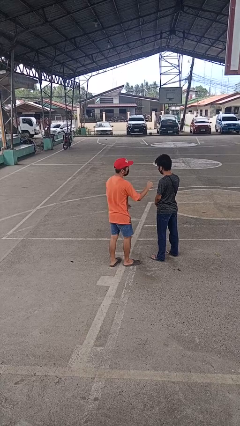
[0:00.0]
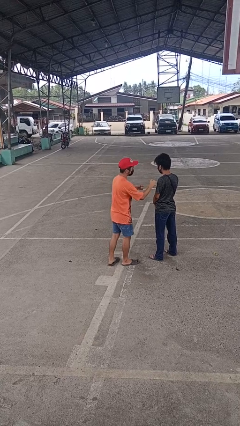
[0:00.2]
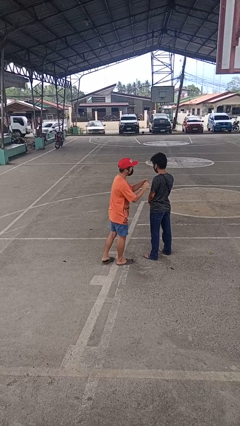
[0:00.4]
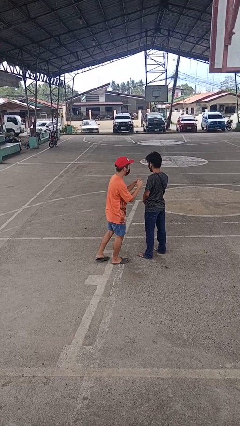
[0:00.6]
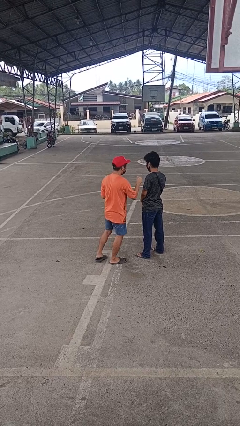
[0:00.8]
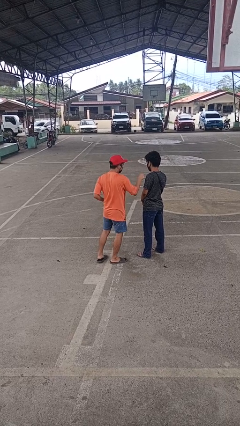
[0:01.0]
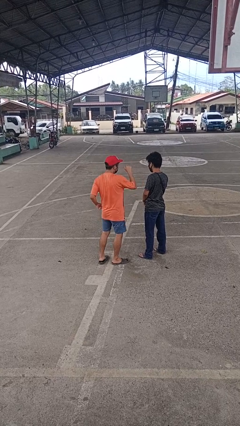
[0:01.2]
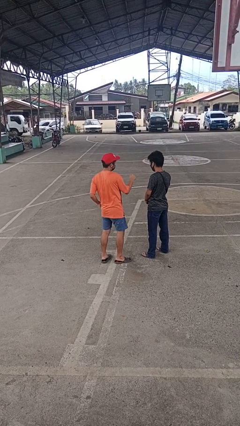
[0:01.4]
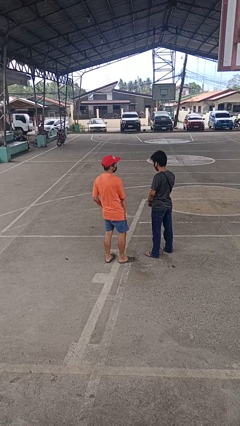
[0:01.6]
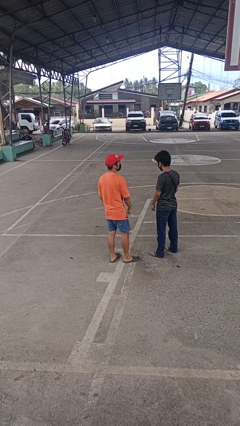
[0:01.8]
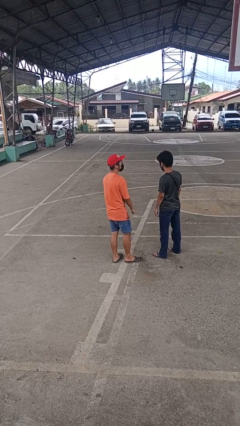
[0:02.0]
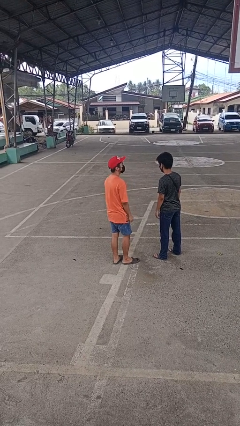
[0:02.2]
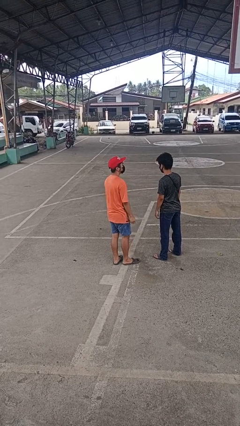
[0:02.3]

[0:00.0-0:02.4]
person pounds shoulders of person

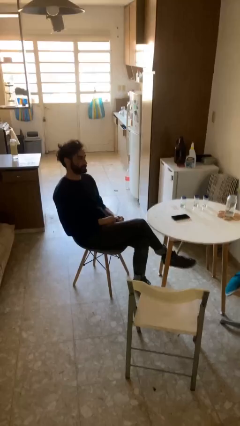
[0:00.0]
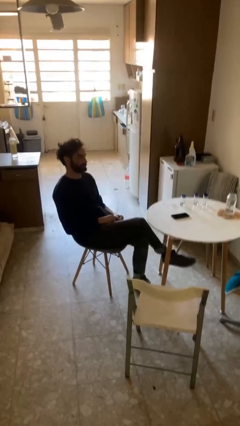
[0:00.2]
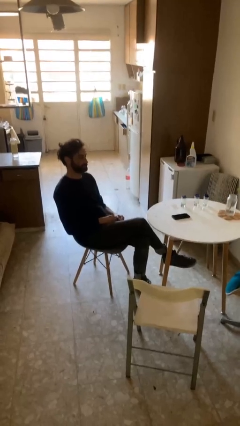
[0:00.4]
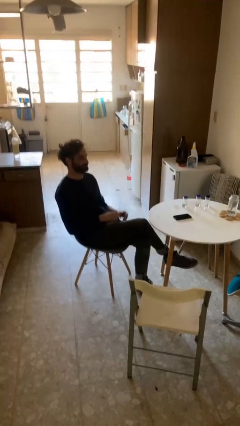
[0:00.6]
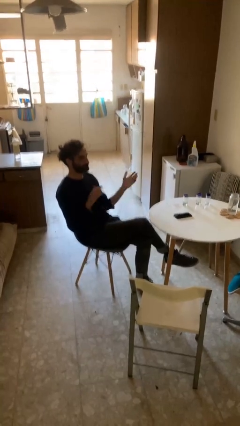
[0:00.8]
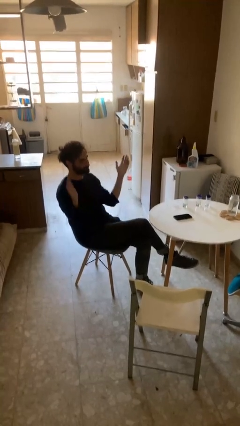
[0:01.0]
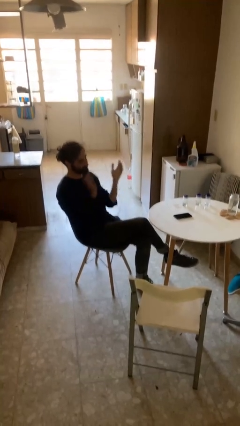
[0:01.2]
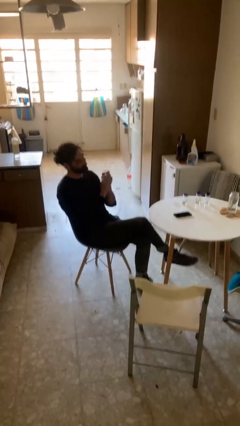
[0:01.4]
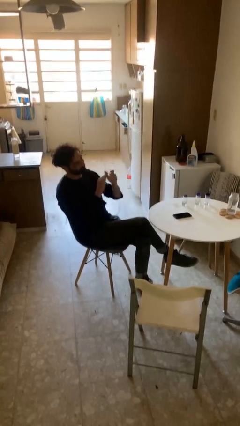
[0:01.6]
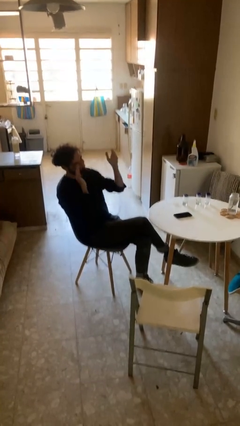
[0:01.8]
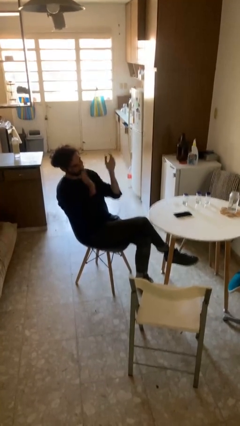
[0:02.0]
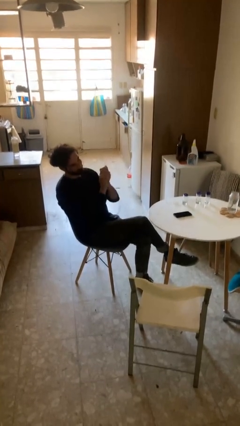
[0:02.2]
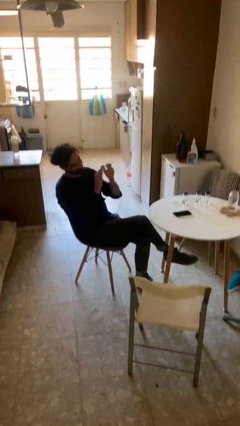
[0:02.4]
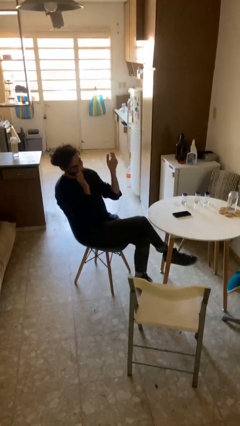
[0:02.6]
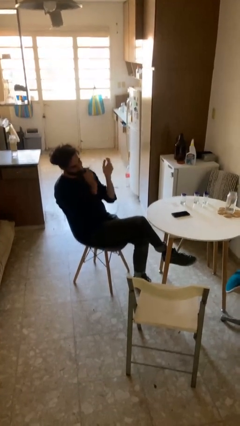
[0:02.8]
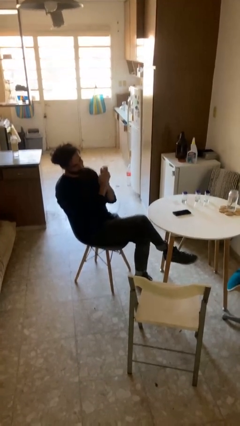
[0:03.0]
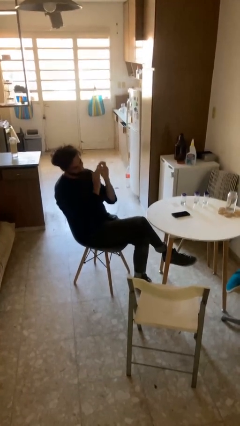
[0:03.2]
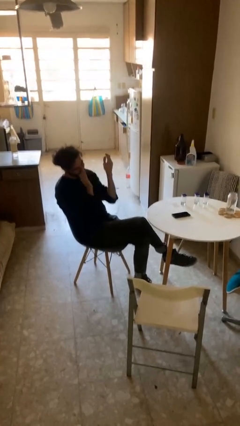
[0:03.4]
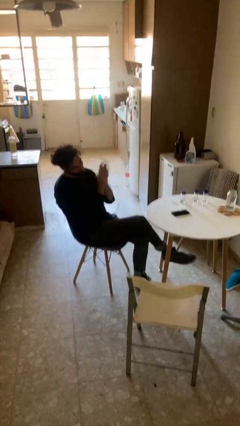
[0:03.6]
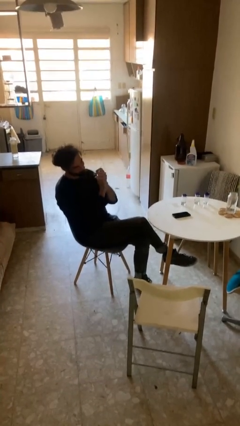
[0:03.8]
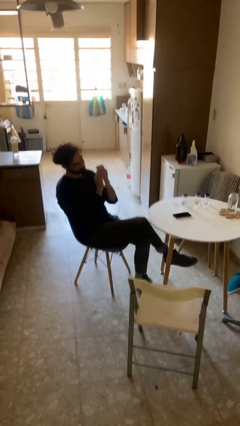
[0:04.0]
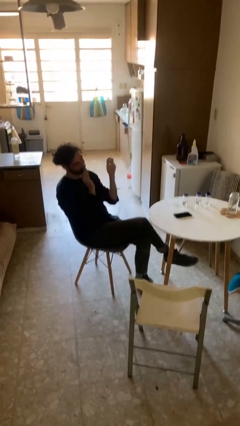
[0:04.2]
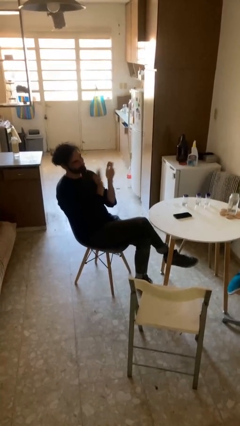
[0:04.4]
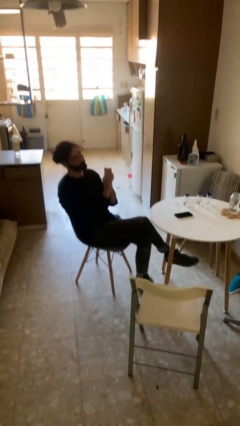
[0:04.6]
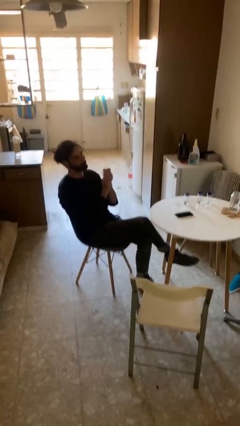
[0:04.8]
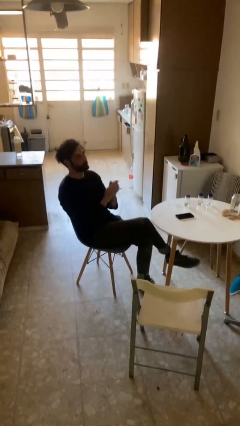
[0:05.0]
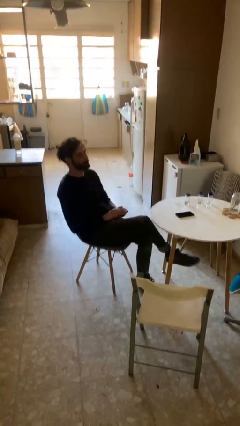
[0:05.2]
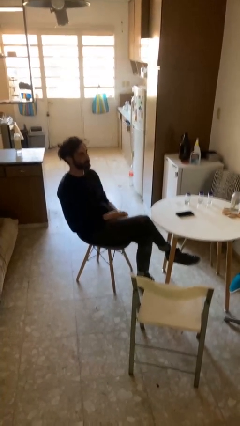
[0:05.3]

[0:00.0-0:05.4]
person claps hands

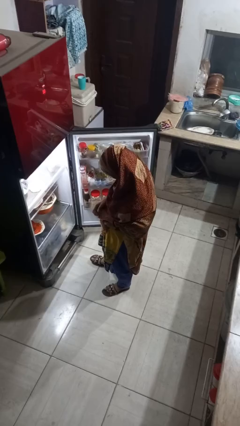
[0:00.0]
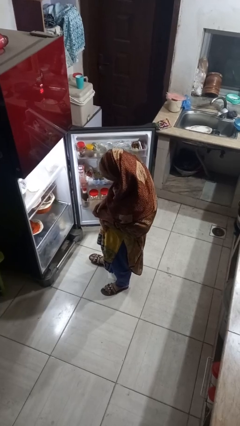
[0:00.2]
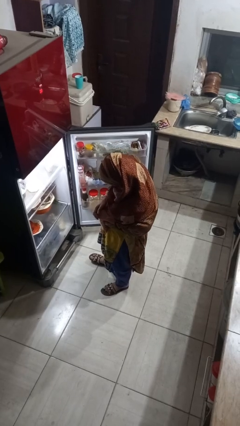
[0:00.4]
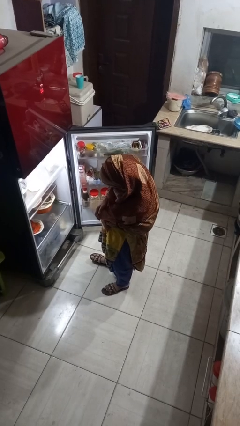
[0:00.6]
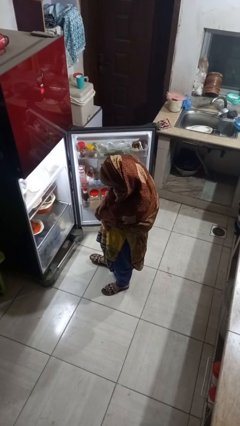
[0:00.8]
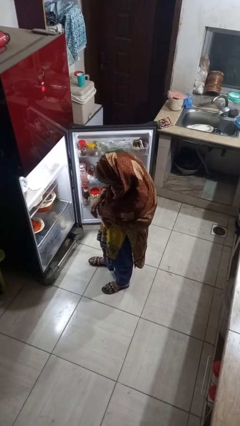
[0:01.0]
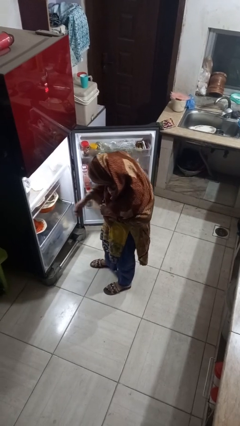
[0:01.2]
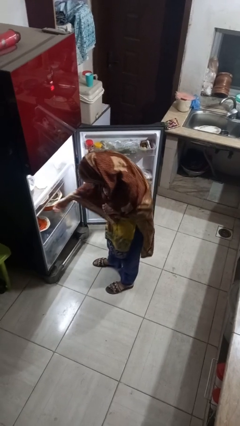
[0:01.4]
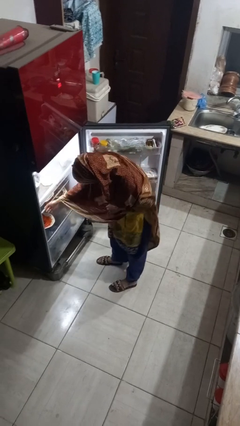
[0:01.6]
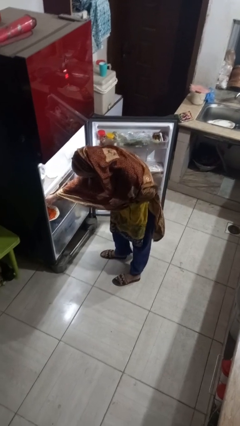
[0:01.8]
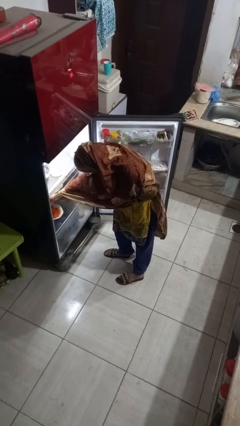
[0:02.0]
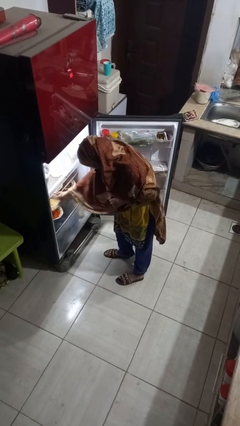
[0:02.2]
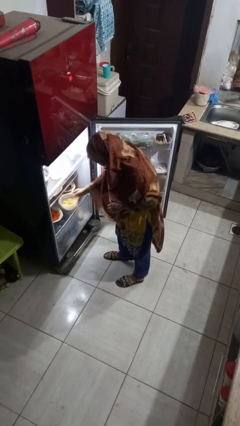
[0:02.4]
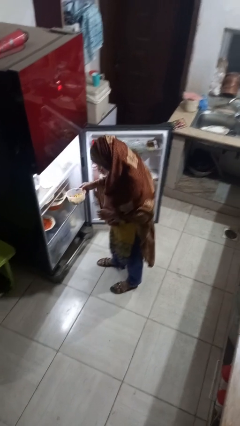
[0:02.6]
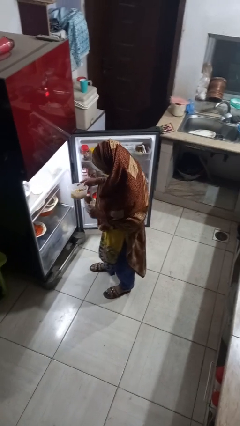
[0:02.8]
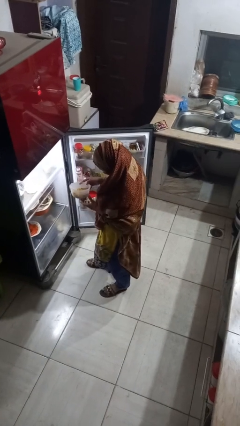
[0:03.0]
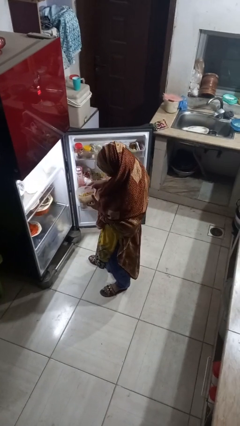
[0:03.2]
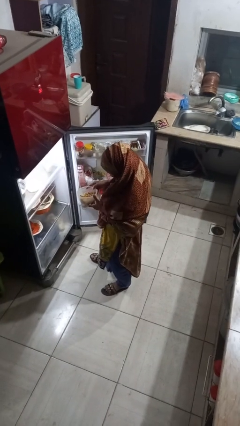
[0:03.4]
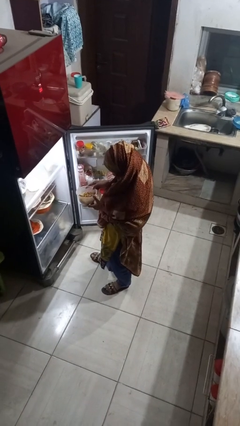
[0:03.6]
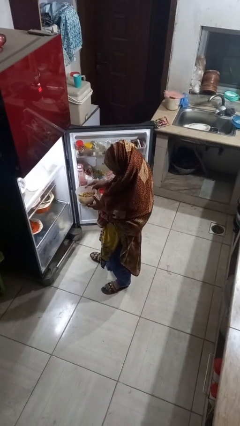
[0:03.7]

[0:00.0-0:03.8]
person takes object from refrigerator

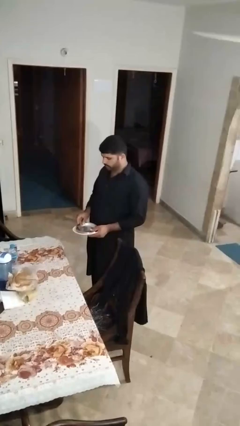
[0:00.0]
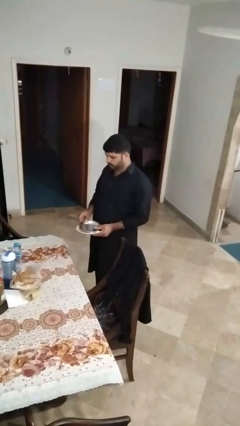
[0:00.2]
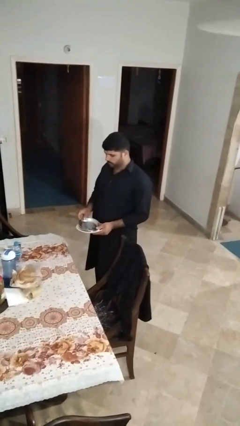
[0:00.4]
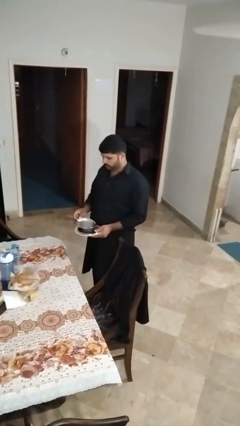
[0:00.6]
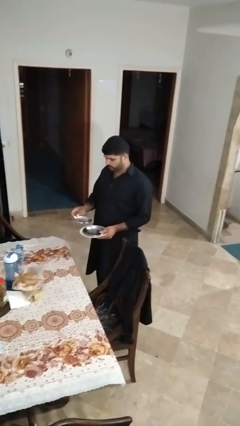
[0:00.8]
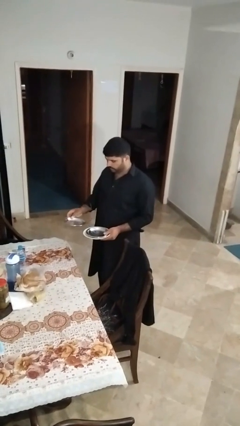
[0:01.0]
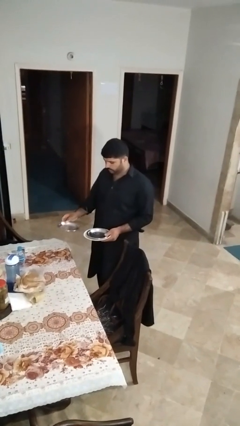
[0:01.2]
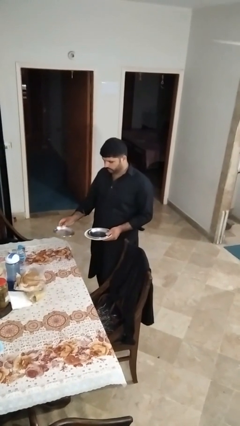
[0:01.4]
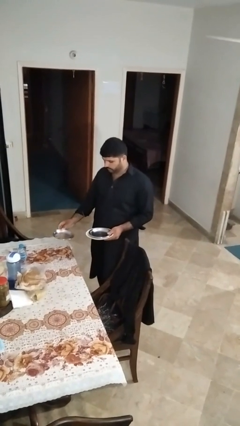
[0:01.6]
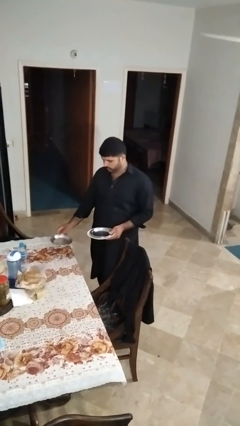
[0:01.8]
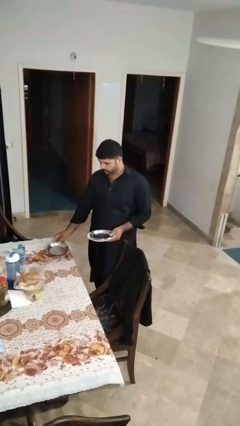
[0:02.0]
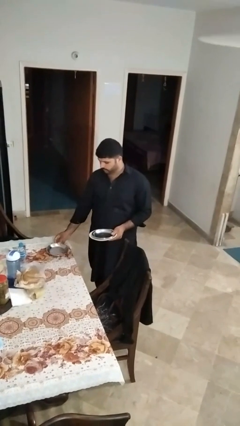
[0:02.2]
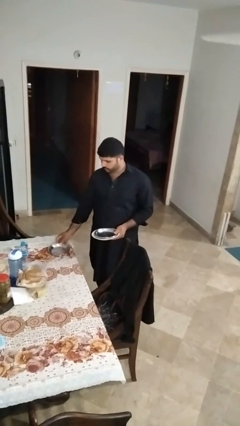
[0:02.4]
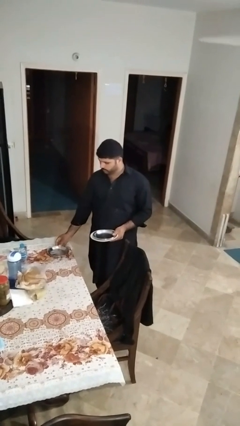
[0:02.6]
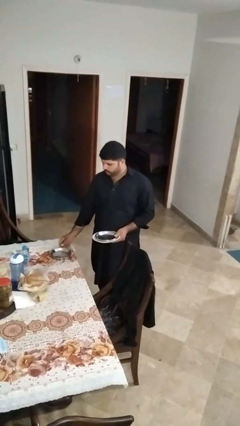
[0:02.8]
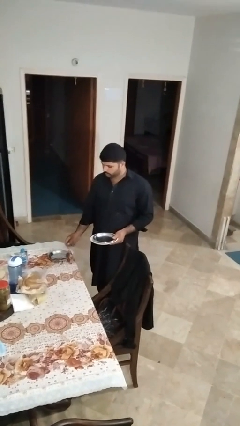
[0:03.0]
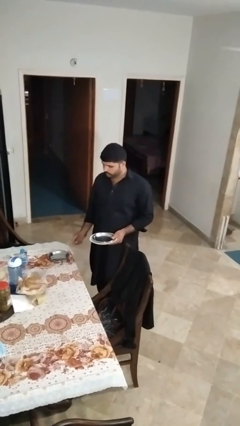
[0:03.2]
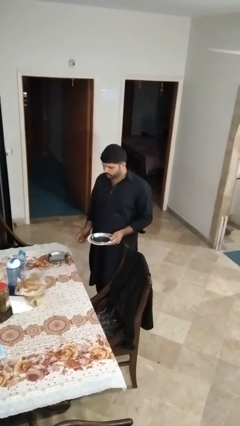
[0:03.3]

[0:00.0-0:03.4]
person sets table

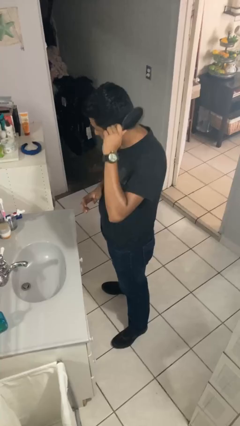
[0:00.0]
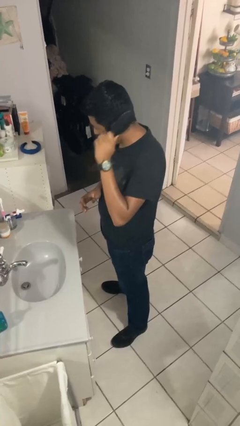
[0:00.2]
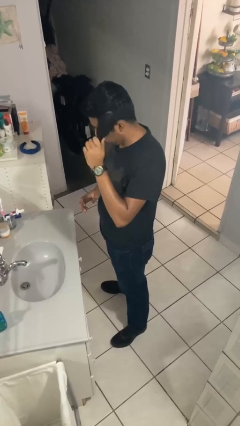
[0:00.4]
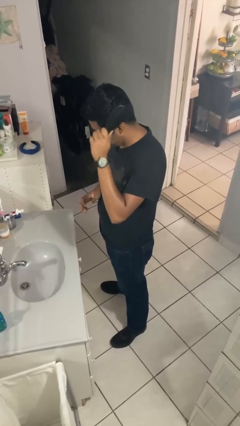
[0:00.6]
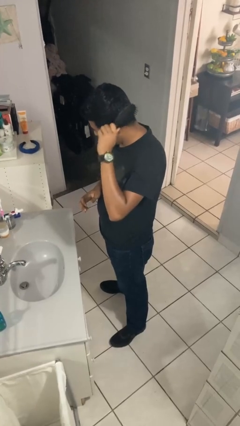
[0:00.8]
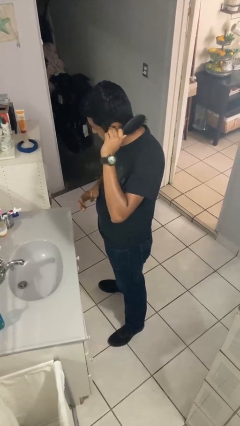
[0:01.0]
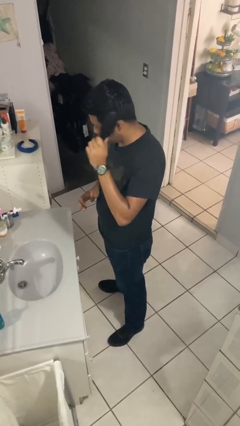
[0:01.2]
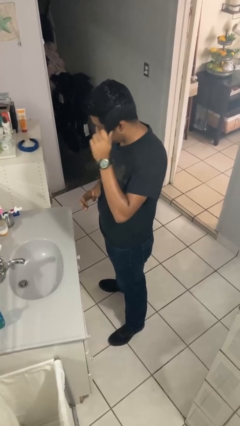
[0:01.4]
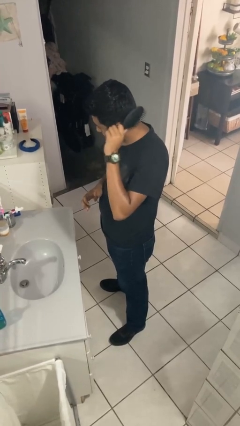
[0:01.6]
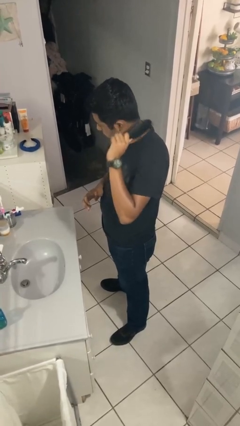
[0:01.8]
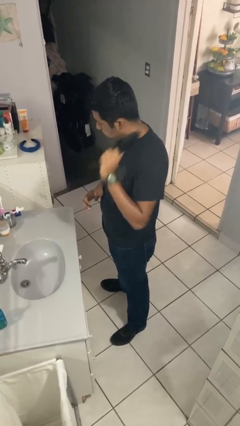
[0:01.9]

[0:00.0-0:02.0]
person brushes hair

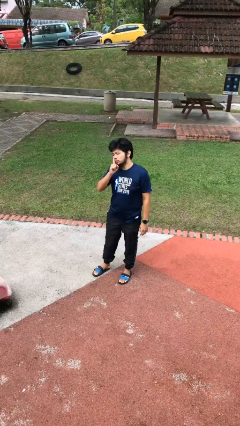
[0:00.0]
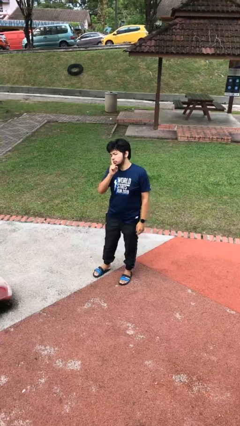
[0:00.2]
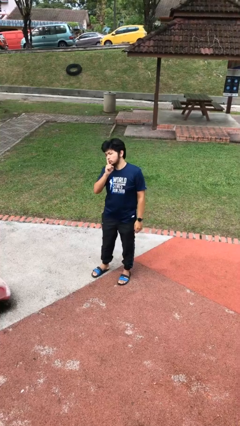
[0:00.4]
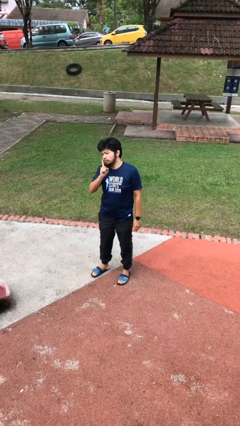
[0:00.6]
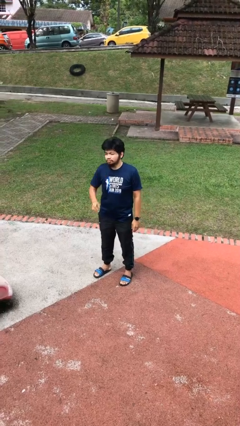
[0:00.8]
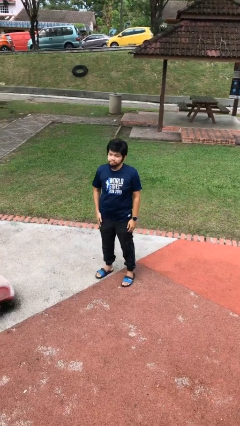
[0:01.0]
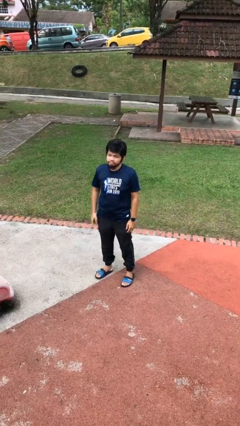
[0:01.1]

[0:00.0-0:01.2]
person gestures be quiet
